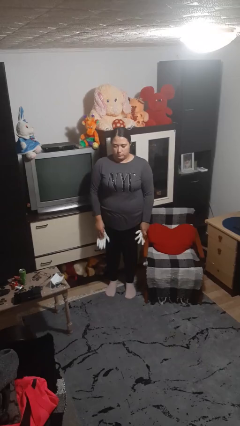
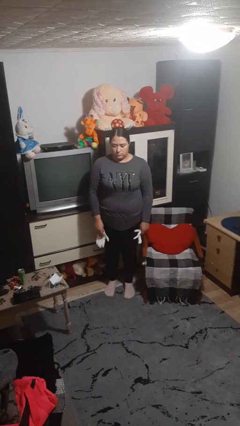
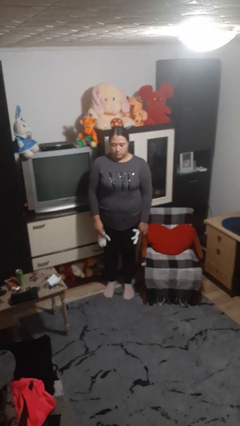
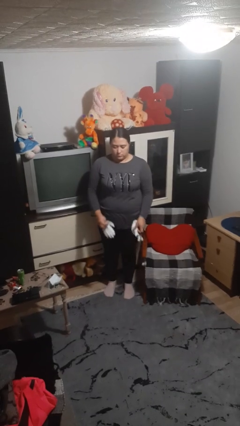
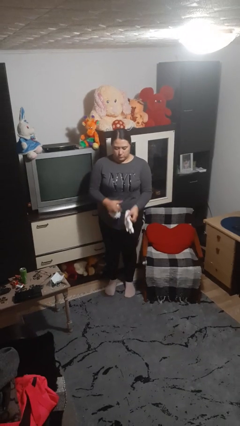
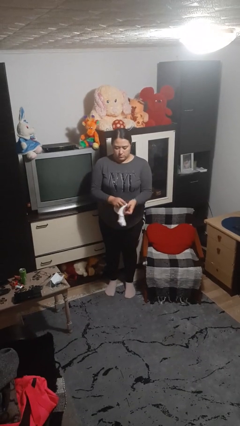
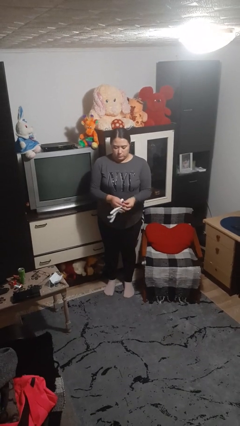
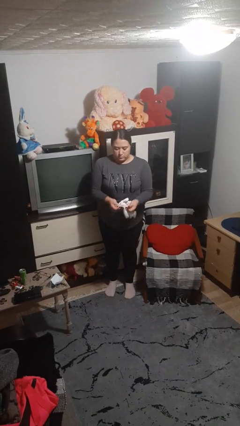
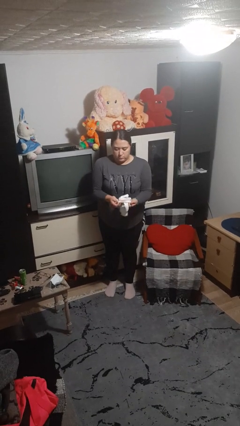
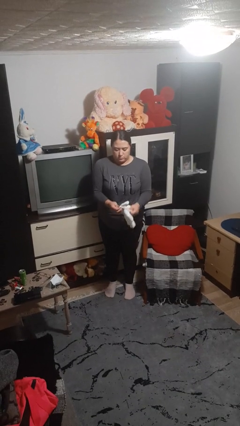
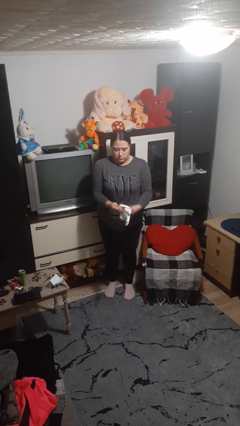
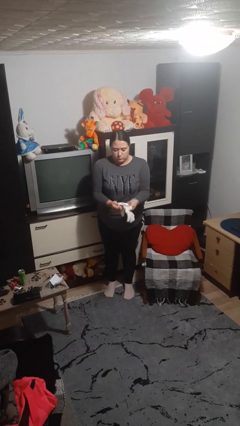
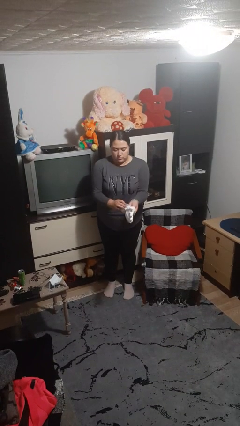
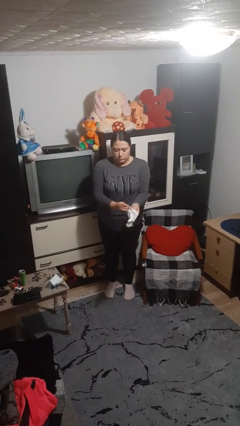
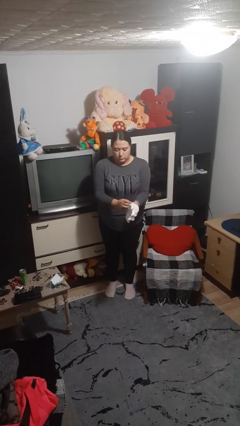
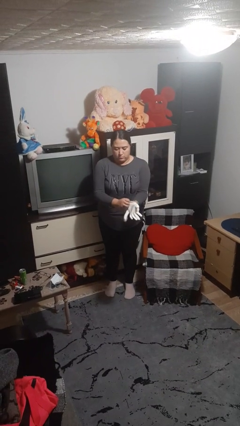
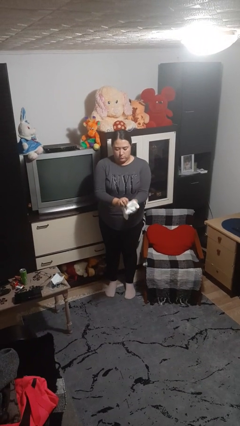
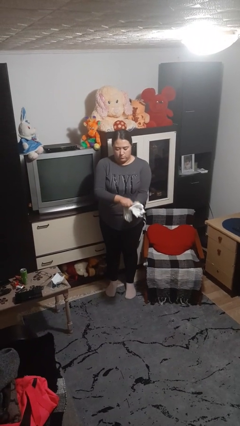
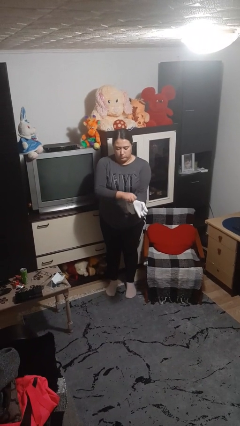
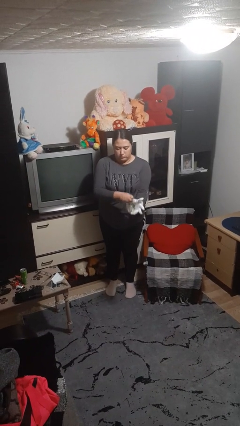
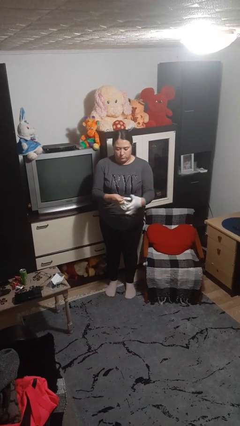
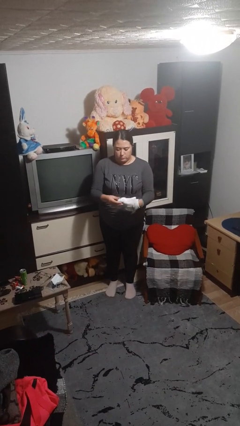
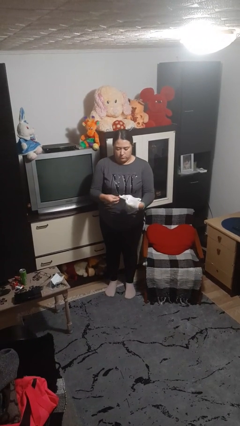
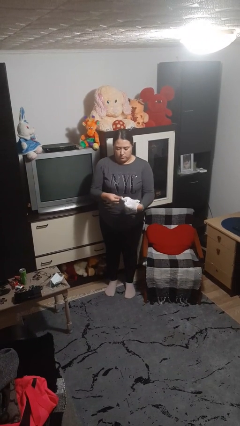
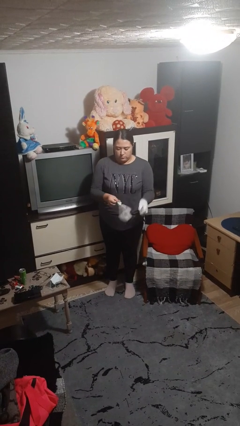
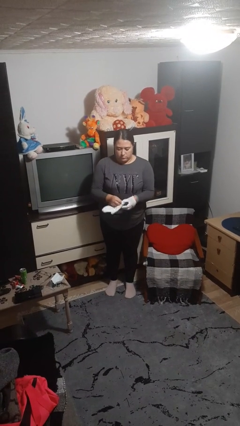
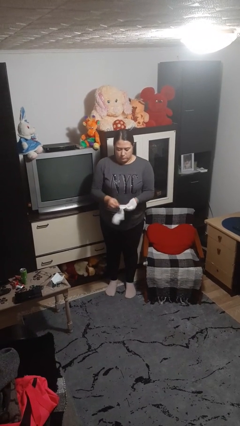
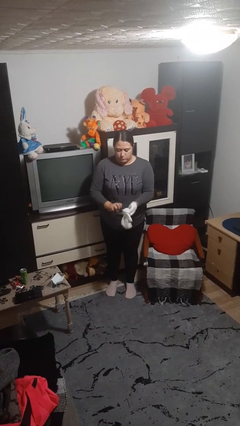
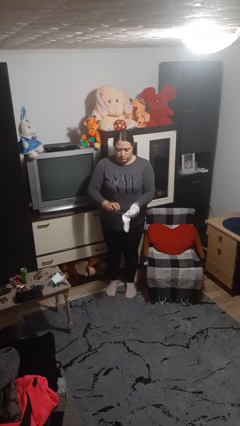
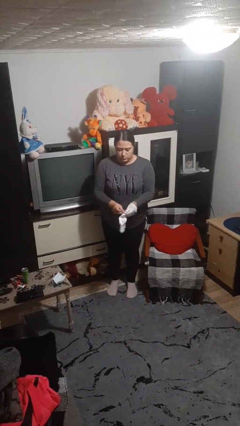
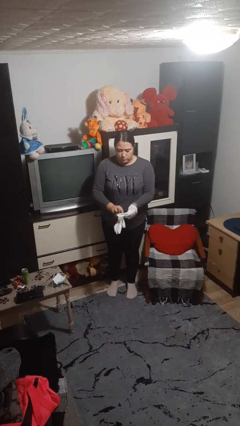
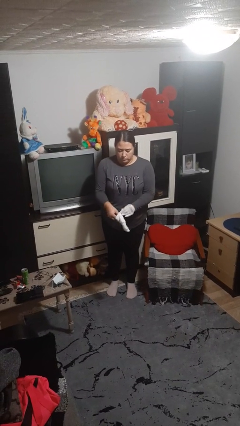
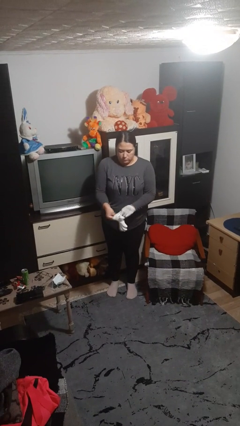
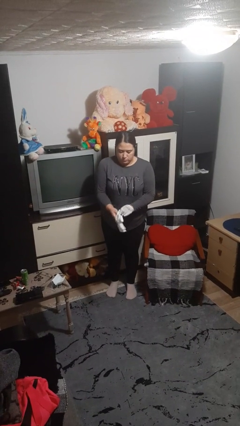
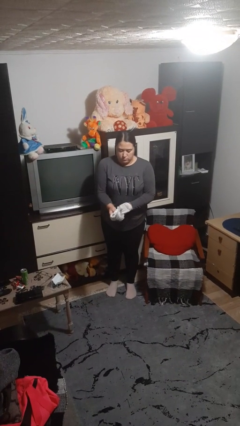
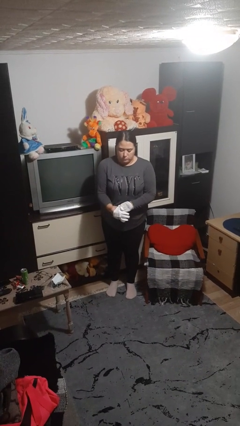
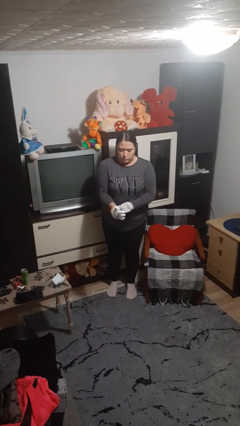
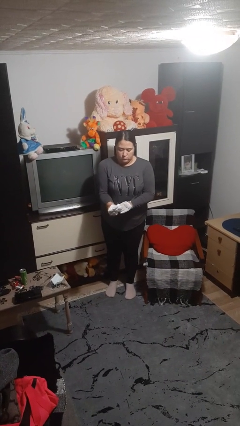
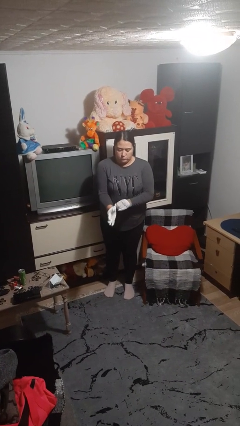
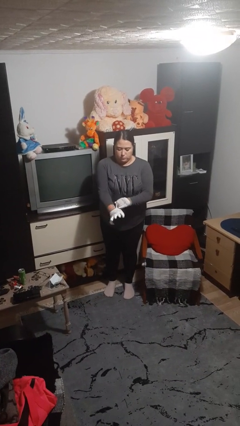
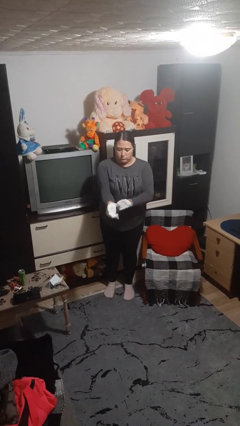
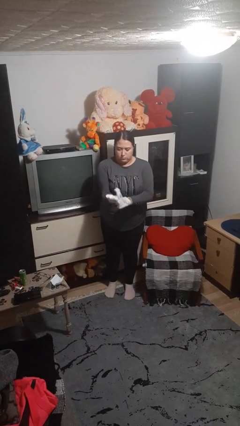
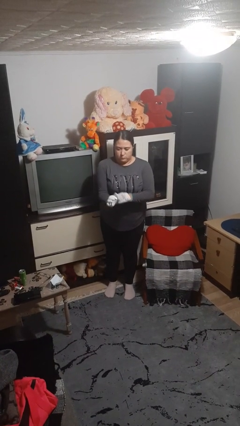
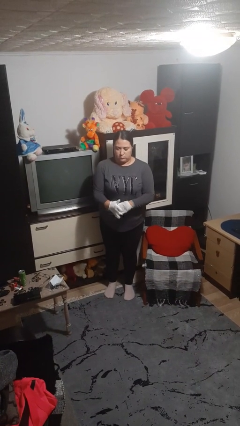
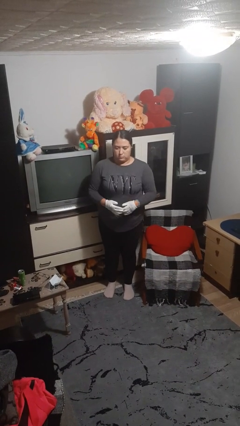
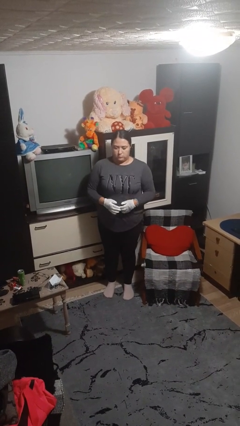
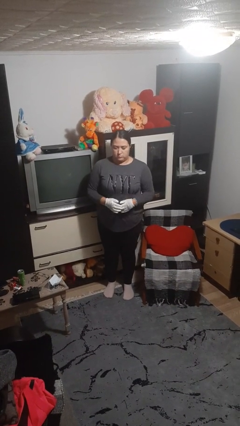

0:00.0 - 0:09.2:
person puts on gloves

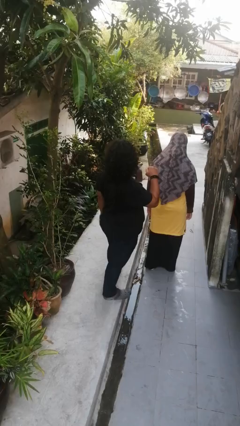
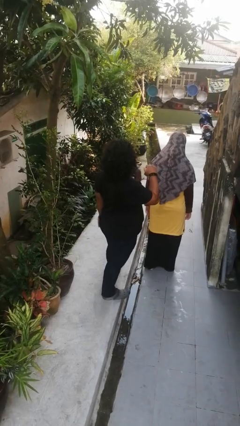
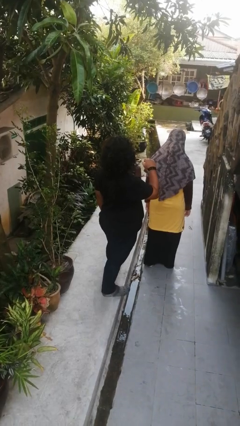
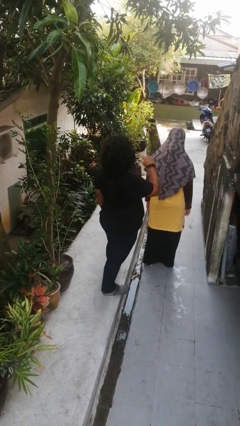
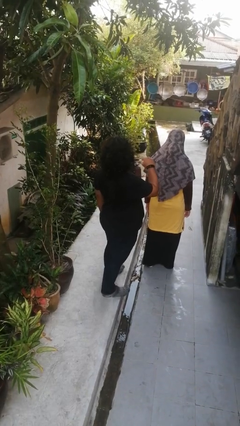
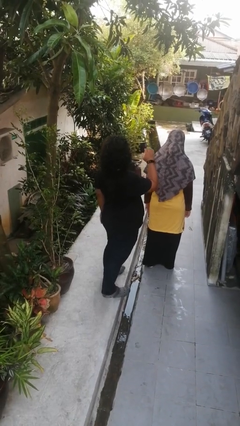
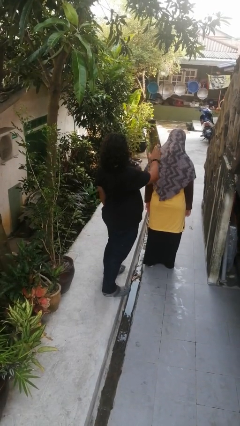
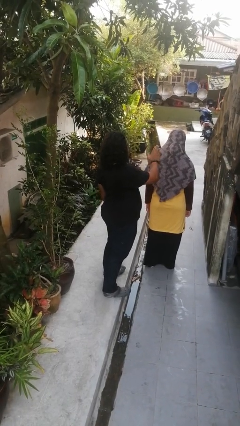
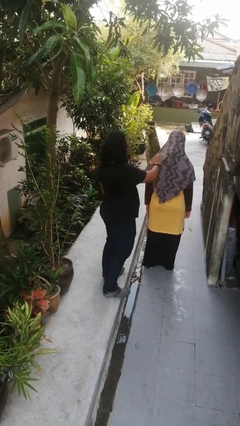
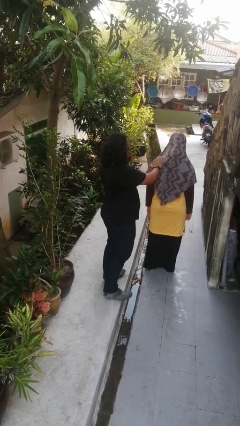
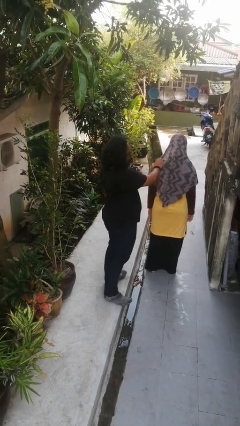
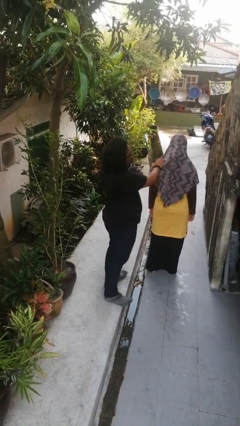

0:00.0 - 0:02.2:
person touches back of person

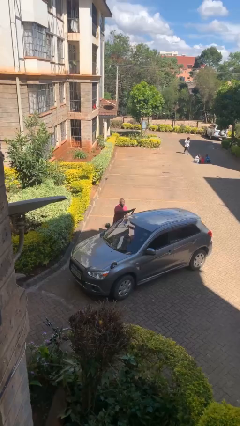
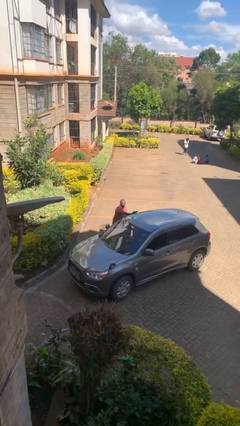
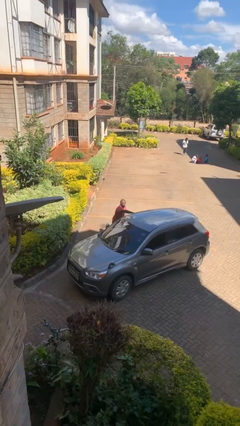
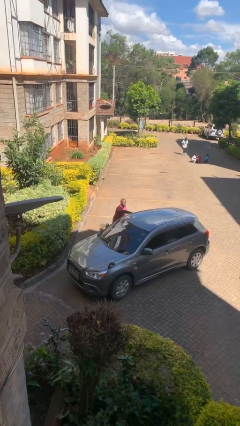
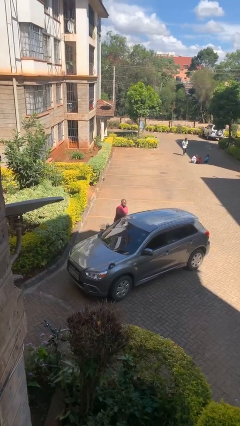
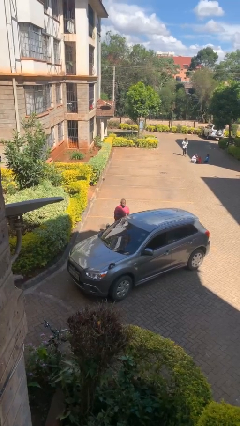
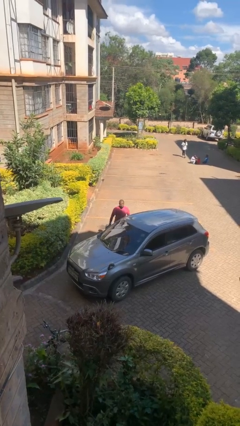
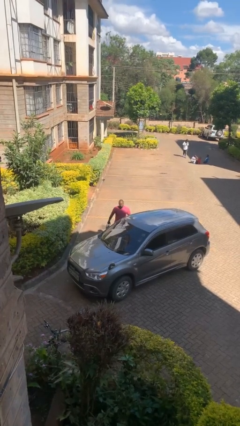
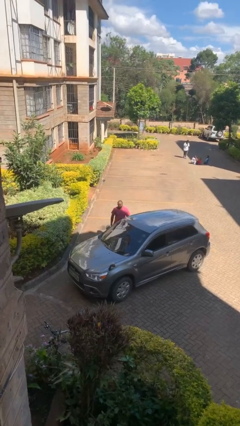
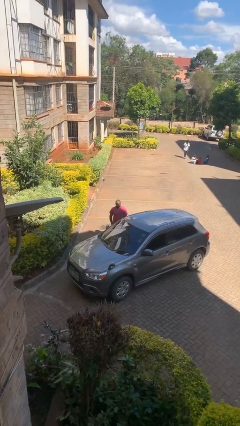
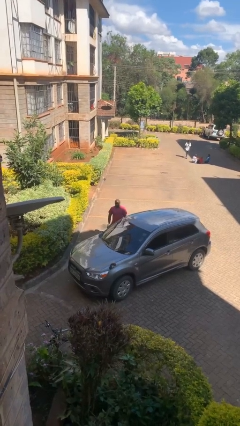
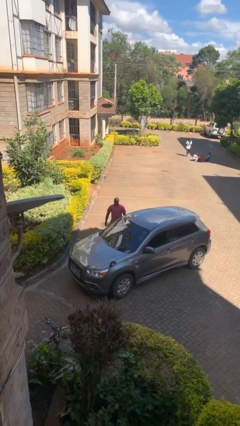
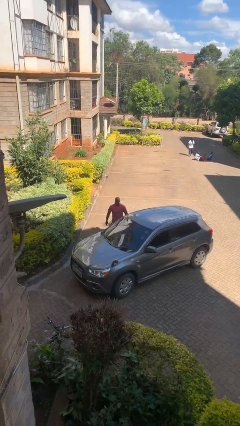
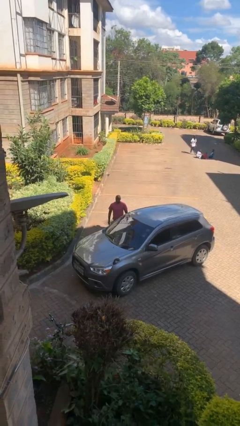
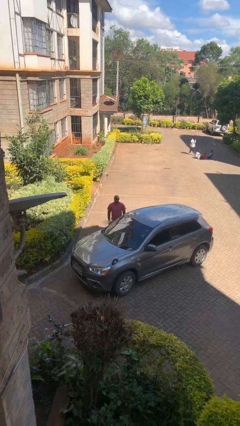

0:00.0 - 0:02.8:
person closes car door

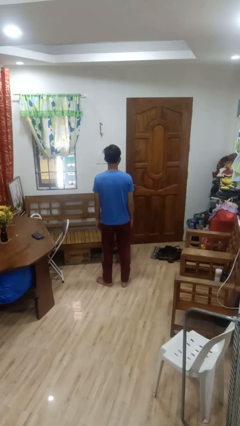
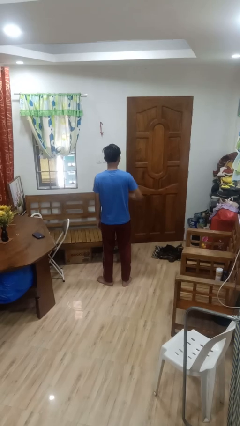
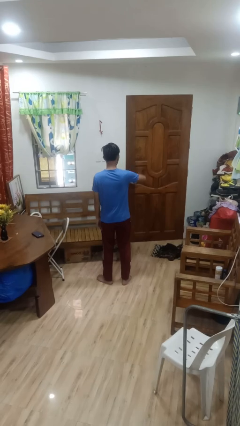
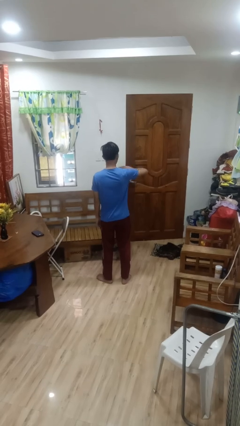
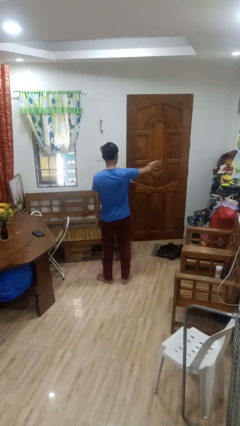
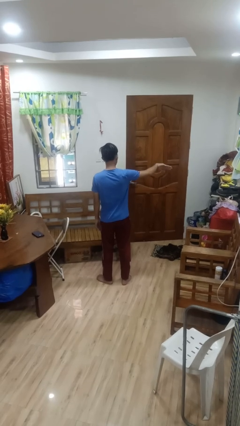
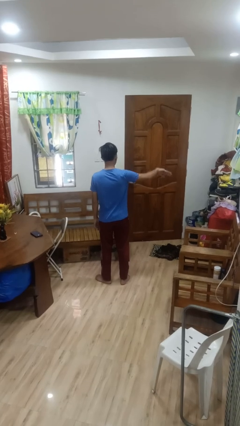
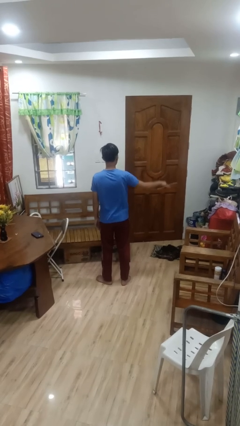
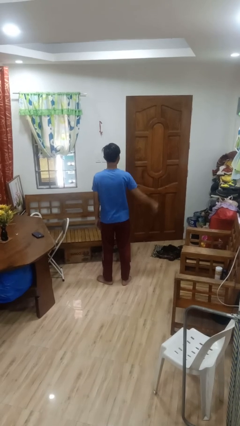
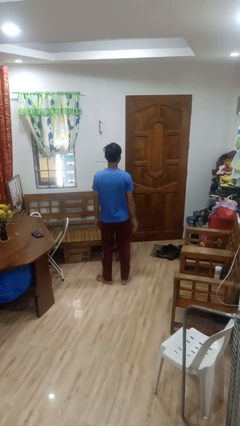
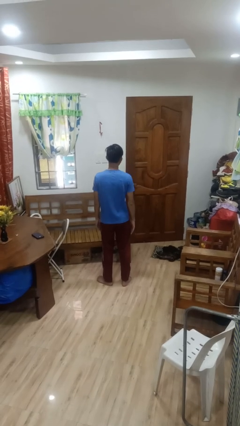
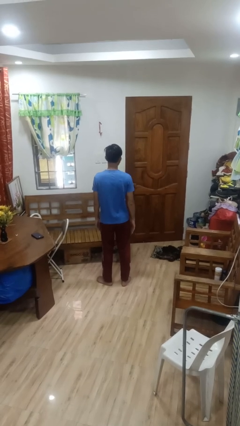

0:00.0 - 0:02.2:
person gestures swipe right

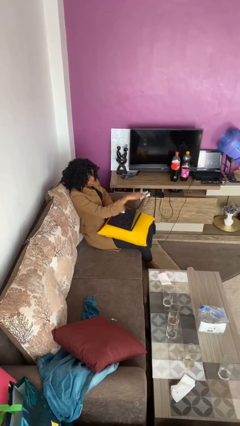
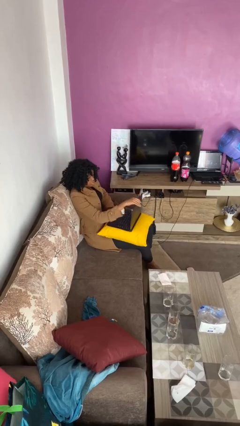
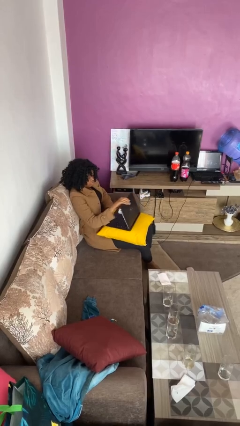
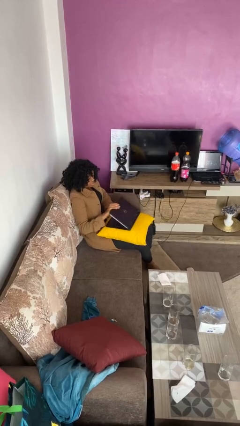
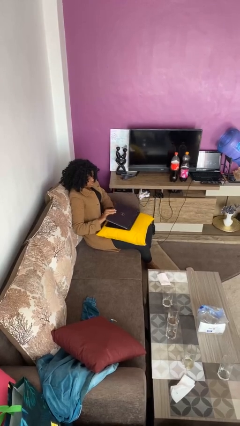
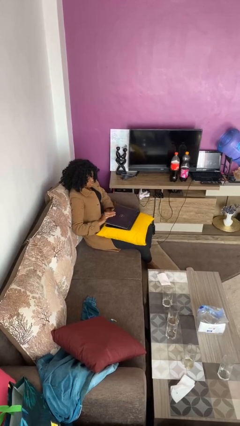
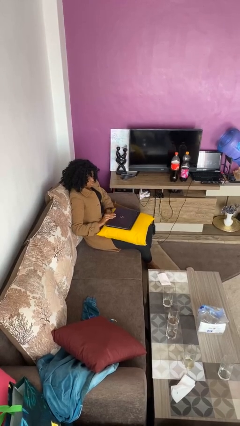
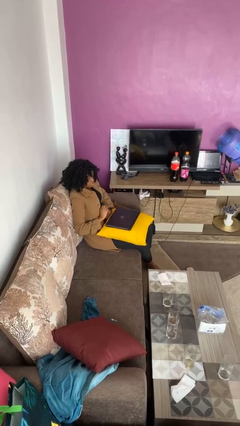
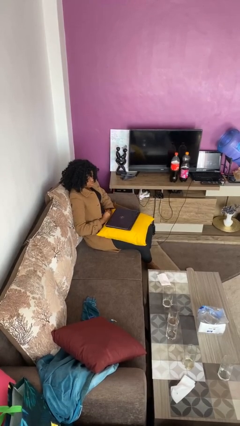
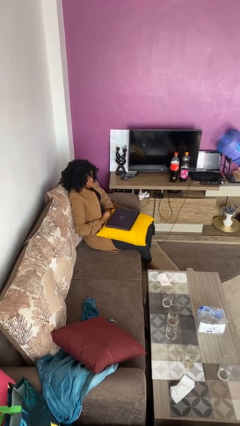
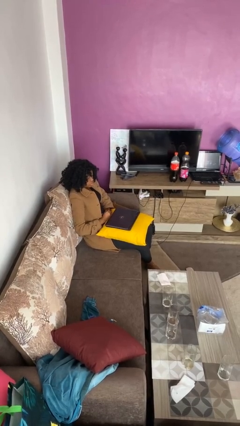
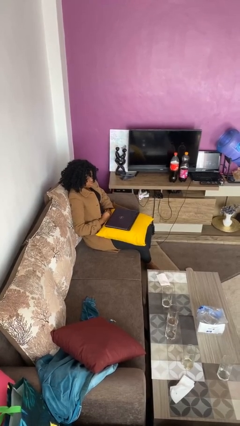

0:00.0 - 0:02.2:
person closes laptop
